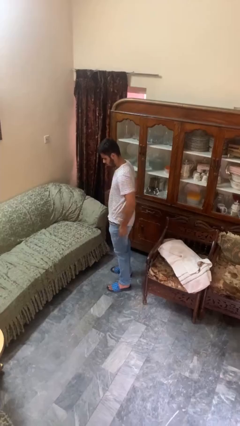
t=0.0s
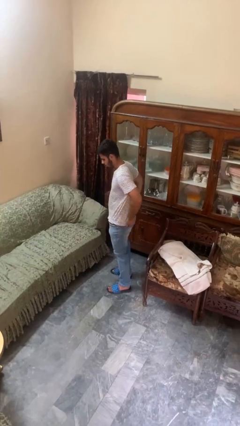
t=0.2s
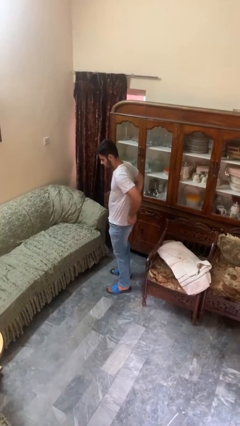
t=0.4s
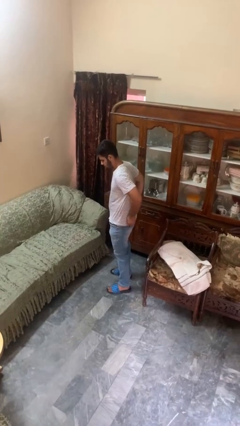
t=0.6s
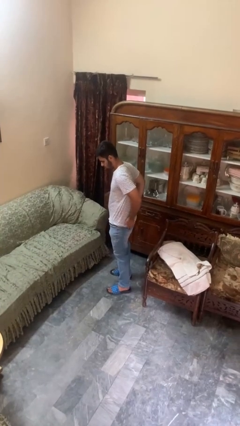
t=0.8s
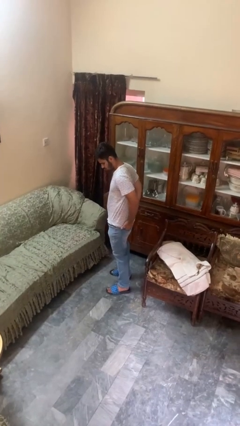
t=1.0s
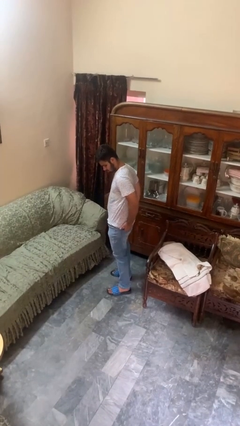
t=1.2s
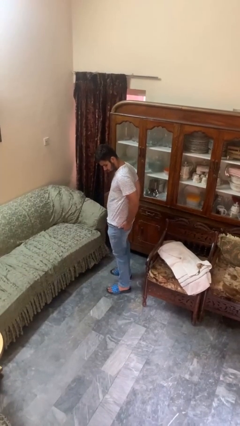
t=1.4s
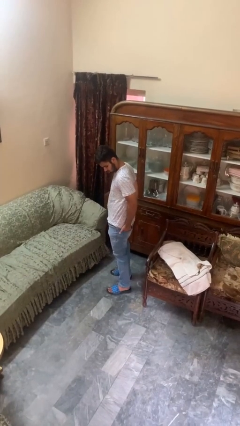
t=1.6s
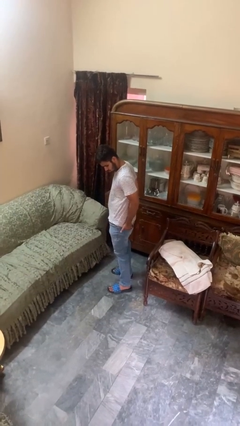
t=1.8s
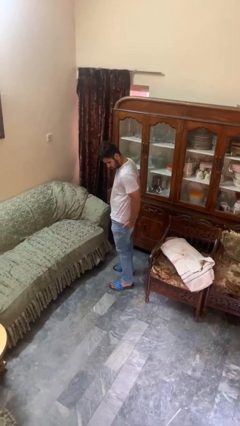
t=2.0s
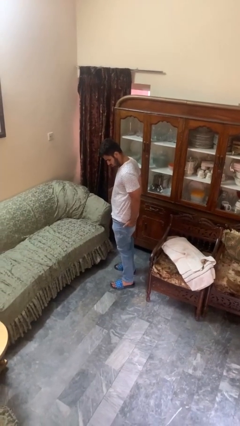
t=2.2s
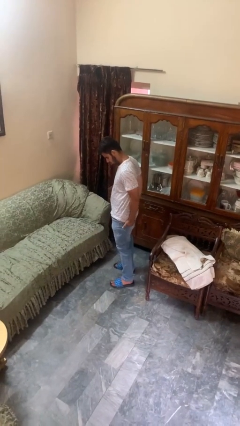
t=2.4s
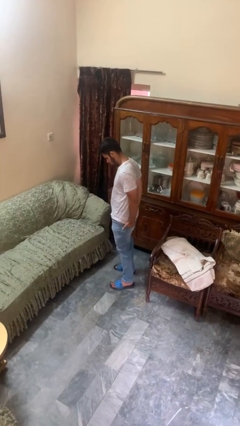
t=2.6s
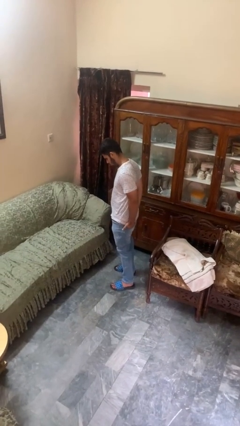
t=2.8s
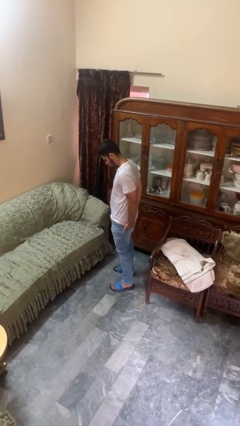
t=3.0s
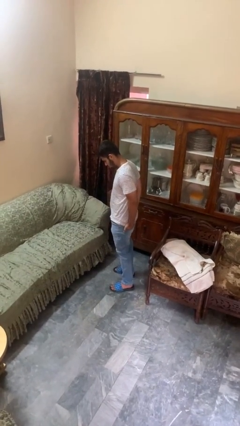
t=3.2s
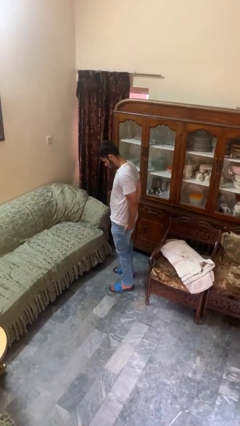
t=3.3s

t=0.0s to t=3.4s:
person puts hands in back pockets

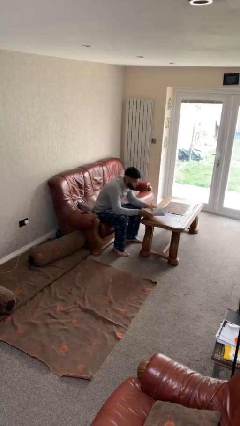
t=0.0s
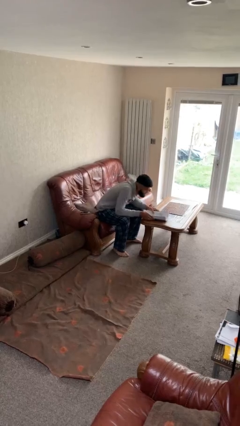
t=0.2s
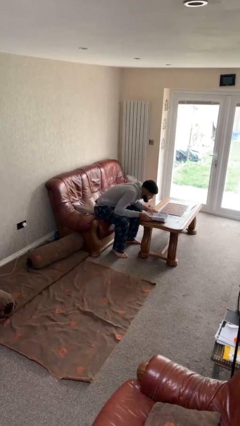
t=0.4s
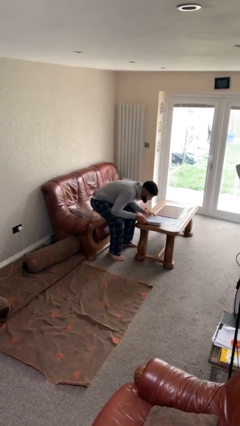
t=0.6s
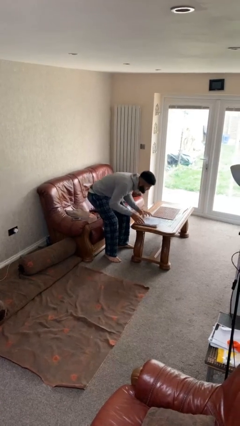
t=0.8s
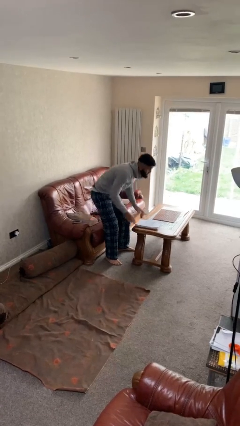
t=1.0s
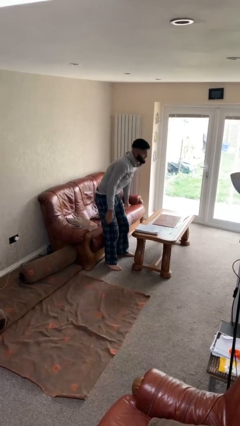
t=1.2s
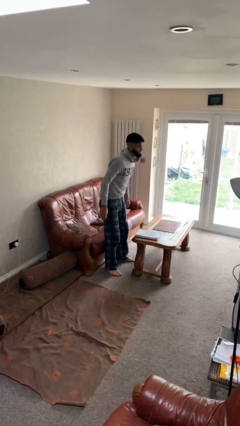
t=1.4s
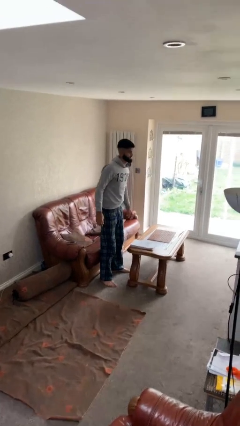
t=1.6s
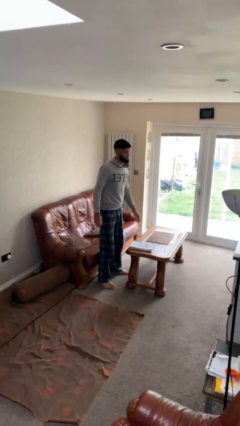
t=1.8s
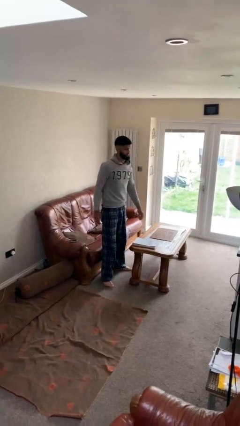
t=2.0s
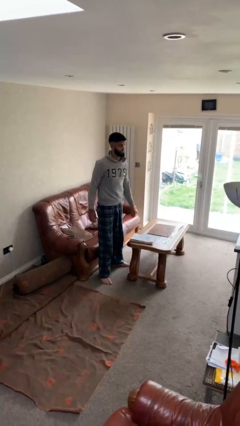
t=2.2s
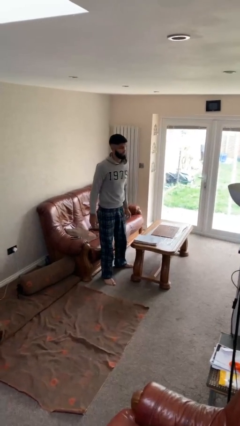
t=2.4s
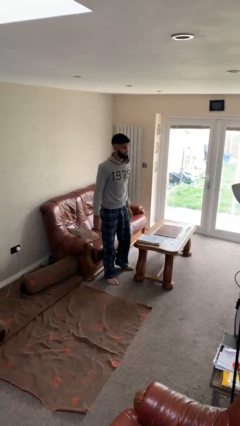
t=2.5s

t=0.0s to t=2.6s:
person stands up

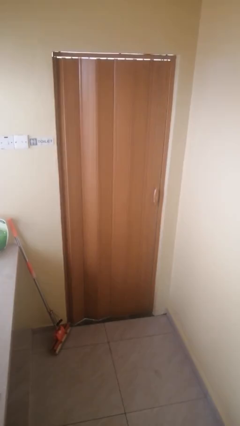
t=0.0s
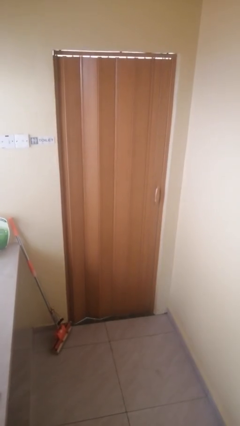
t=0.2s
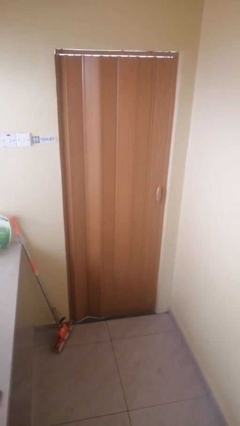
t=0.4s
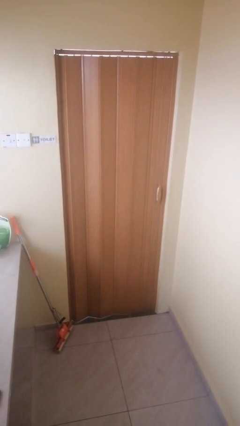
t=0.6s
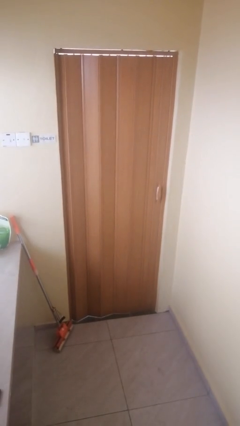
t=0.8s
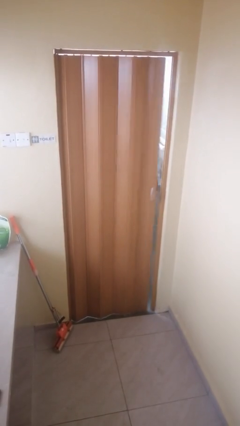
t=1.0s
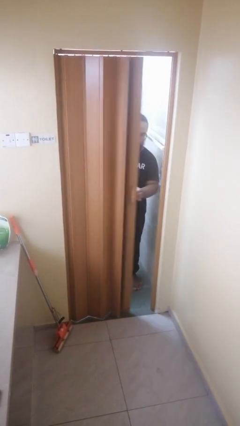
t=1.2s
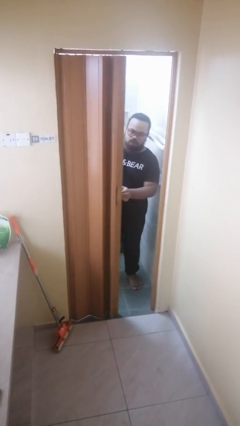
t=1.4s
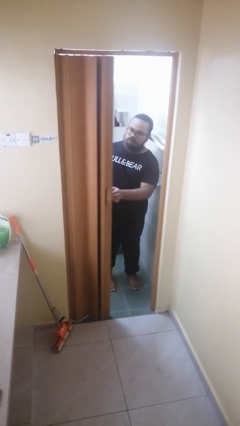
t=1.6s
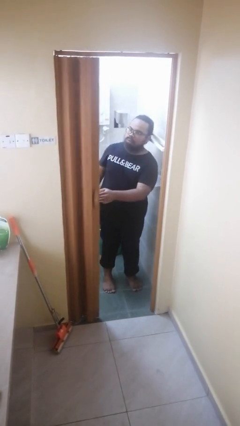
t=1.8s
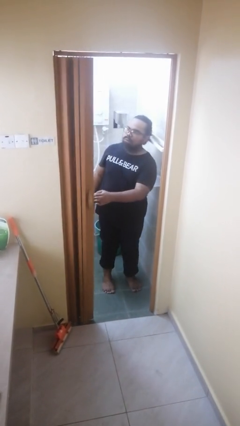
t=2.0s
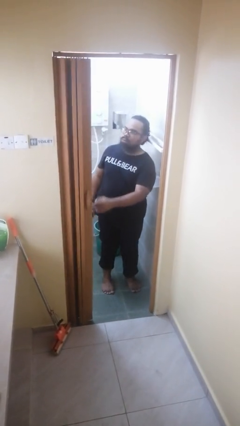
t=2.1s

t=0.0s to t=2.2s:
person opens sliding door

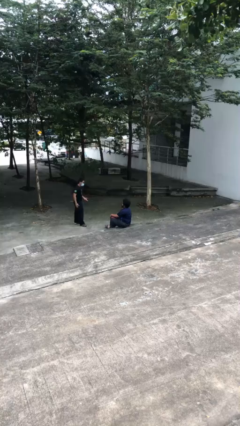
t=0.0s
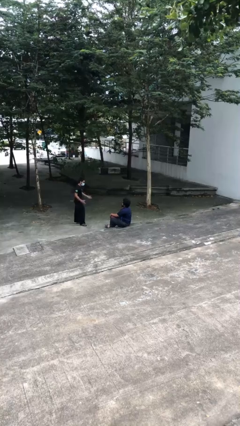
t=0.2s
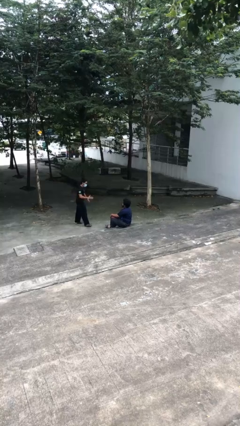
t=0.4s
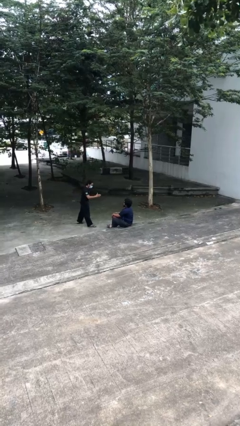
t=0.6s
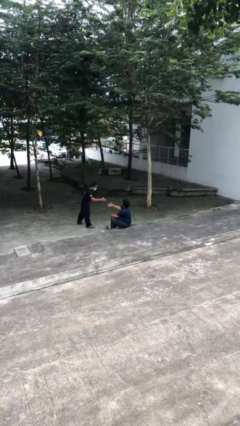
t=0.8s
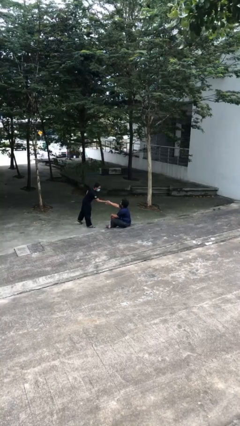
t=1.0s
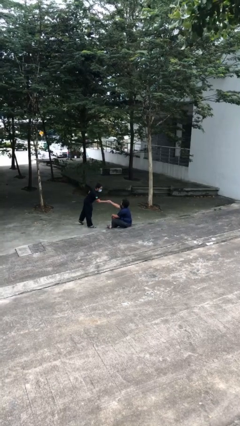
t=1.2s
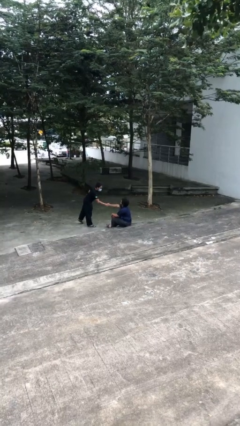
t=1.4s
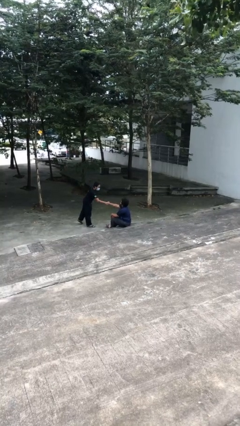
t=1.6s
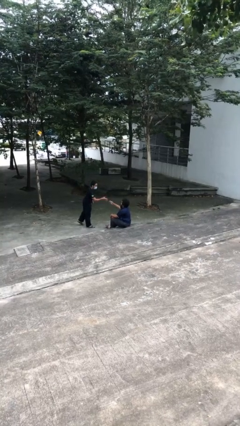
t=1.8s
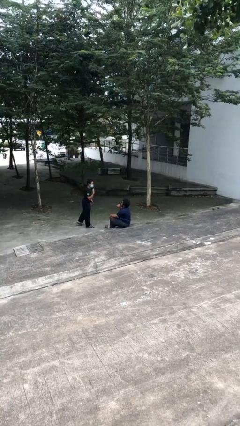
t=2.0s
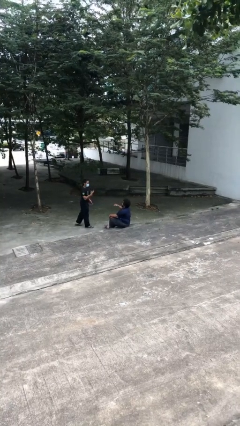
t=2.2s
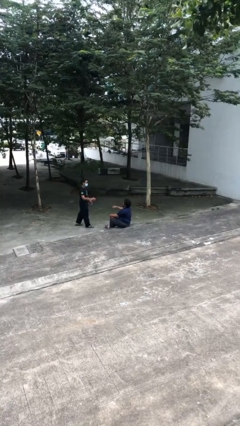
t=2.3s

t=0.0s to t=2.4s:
person shakes hand

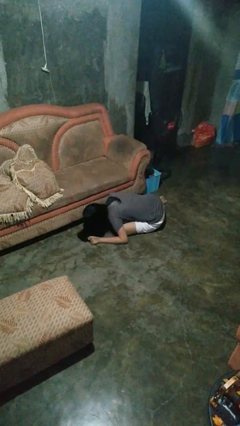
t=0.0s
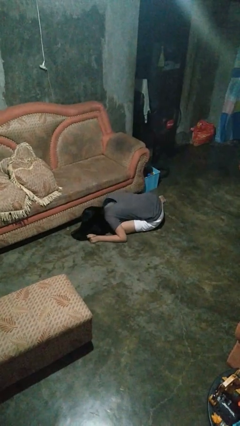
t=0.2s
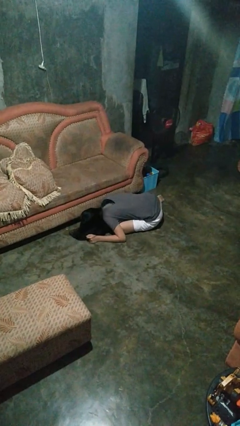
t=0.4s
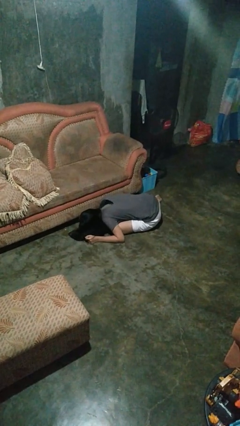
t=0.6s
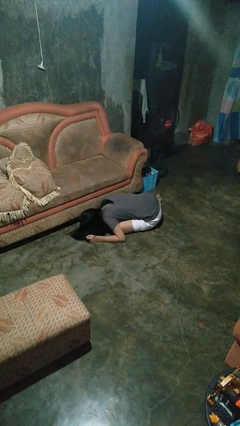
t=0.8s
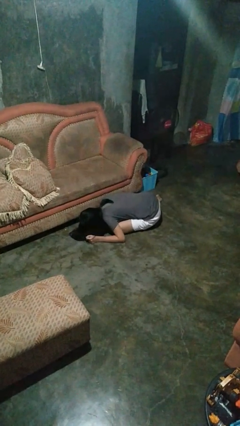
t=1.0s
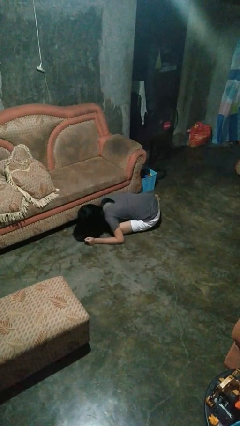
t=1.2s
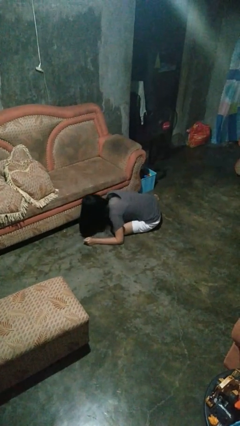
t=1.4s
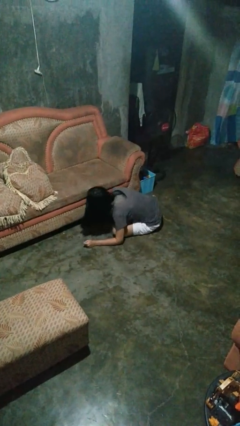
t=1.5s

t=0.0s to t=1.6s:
person searches under couch

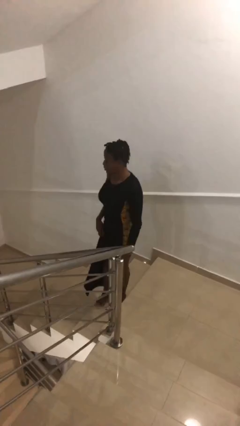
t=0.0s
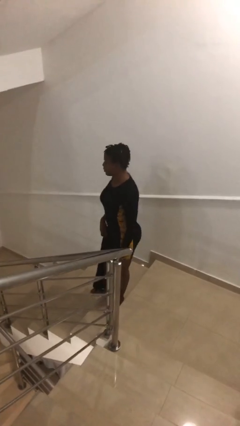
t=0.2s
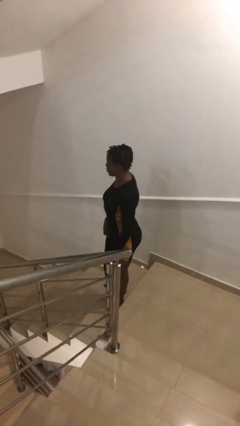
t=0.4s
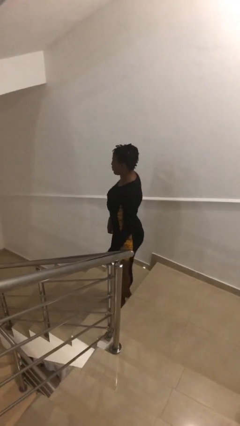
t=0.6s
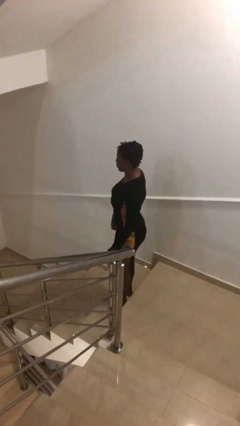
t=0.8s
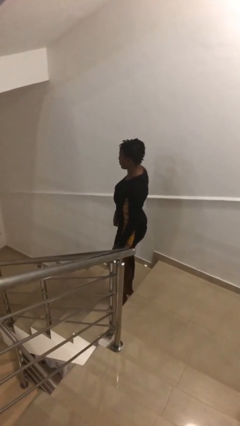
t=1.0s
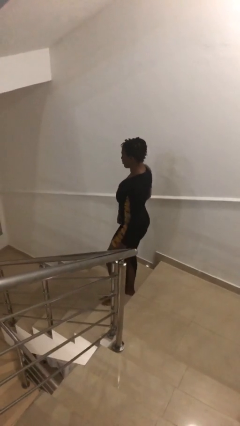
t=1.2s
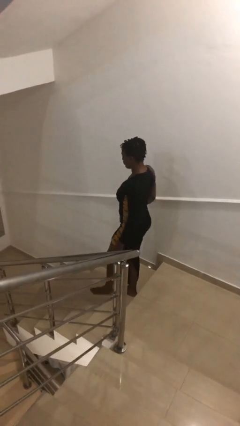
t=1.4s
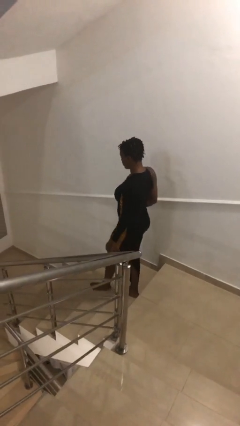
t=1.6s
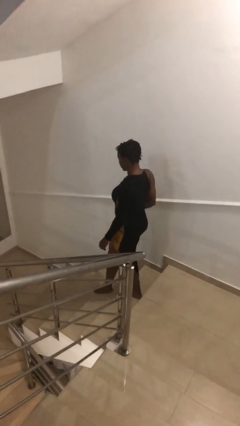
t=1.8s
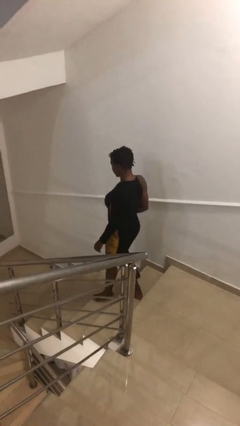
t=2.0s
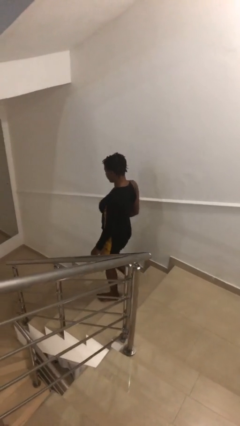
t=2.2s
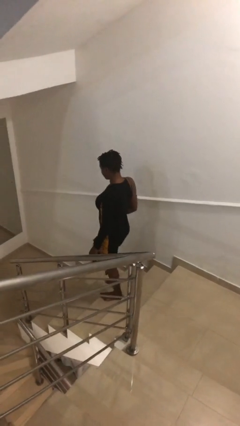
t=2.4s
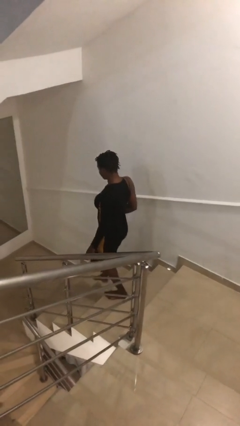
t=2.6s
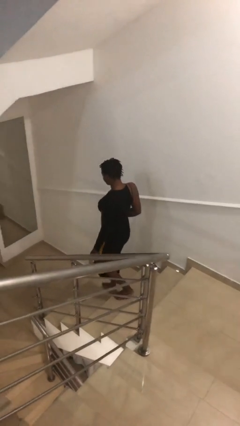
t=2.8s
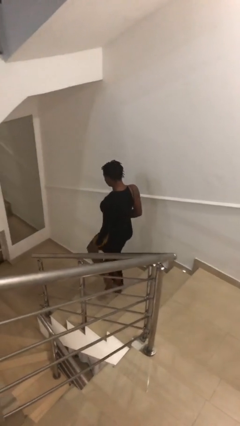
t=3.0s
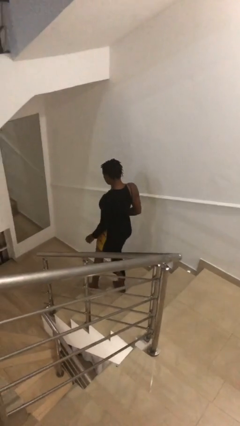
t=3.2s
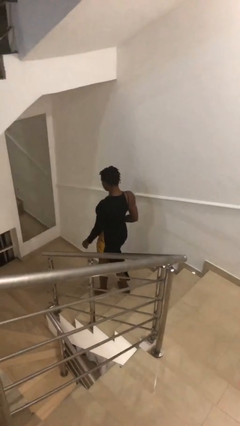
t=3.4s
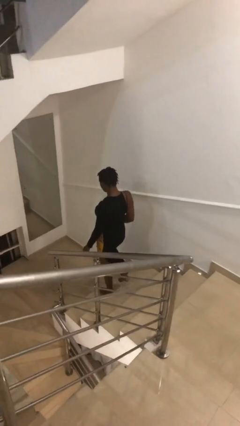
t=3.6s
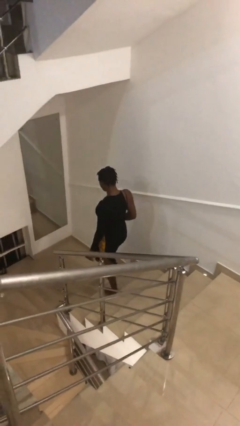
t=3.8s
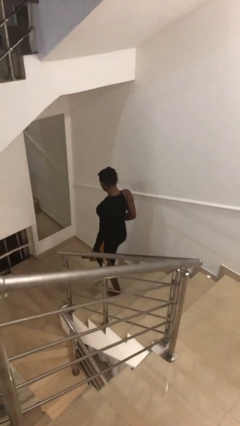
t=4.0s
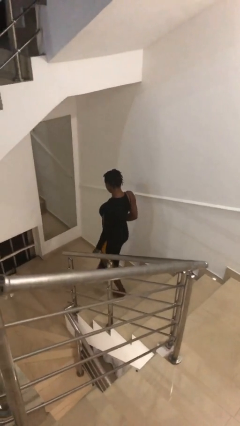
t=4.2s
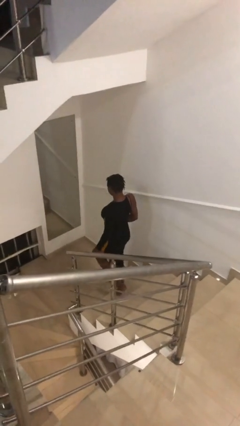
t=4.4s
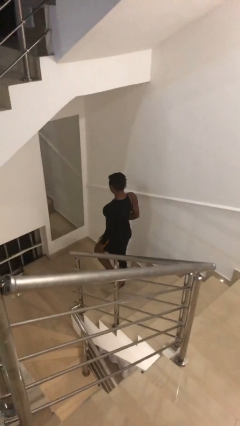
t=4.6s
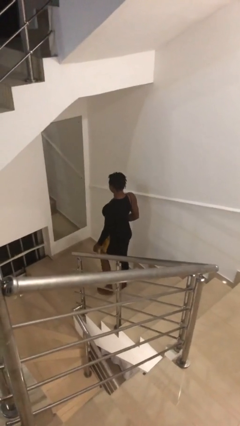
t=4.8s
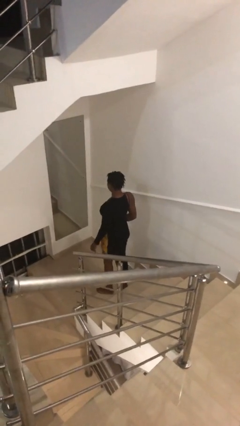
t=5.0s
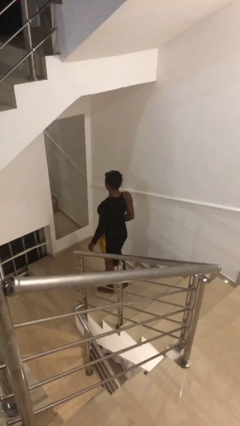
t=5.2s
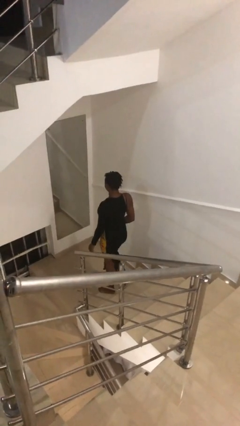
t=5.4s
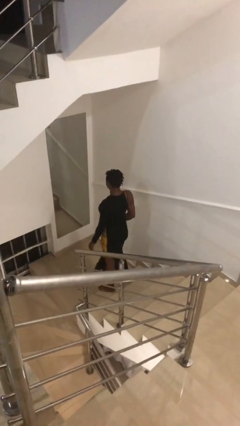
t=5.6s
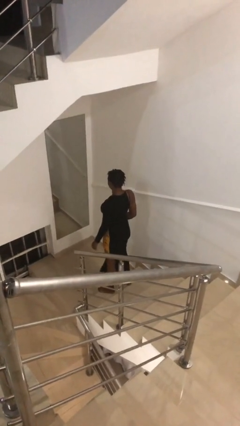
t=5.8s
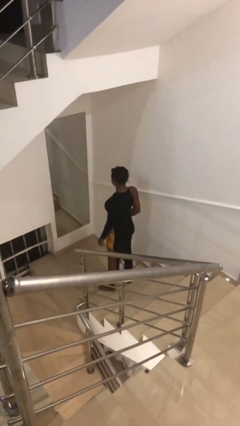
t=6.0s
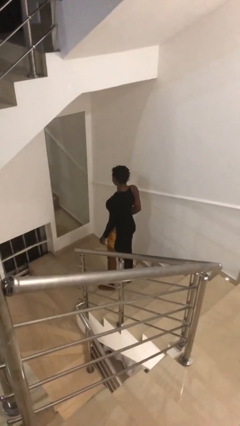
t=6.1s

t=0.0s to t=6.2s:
person climbs down stairs
